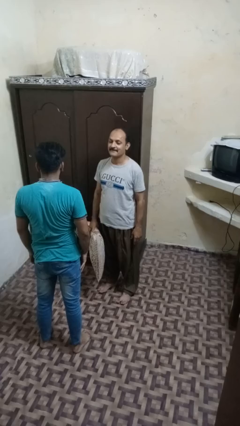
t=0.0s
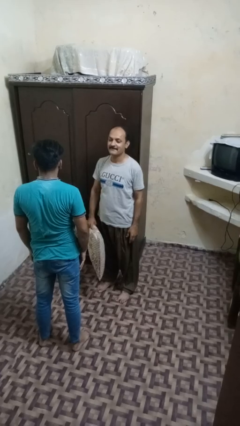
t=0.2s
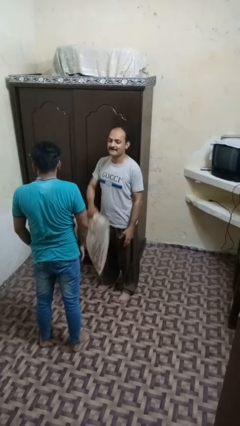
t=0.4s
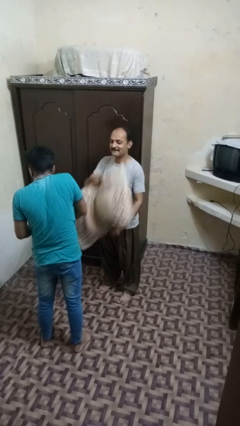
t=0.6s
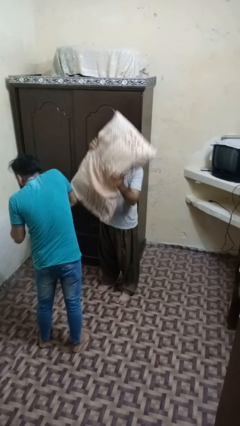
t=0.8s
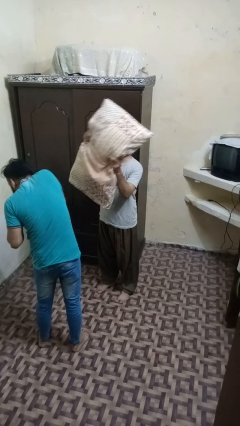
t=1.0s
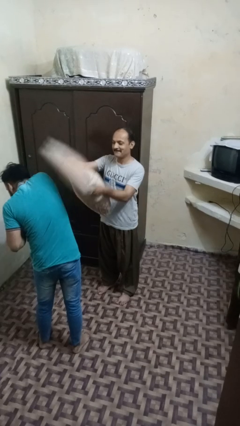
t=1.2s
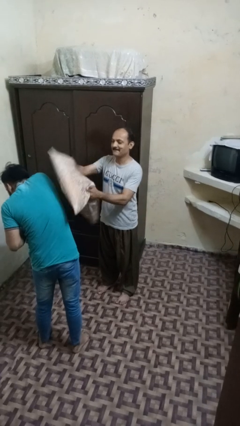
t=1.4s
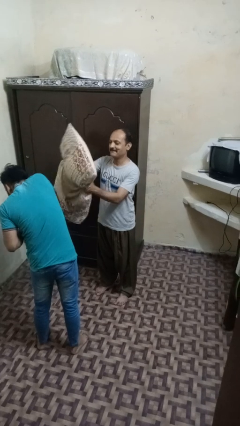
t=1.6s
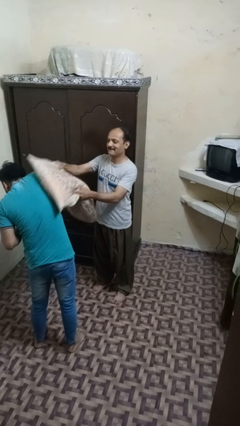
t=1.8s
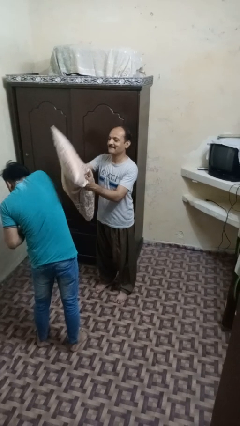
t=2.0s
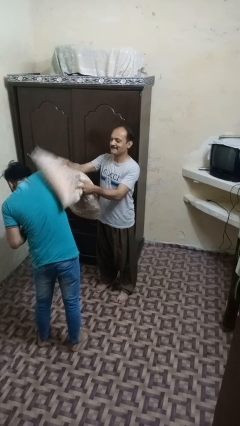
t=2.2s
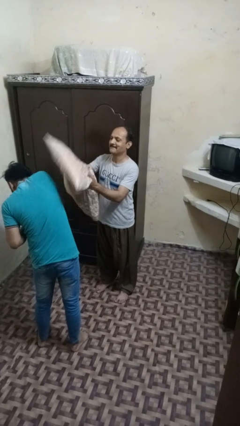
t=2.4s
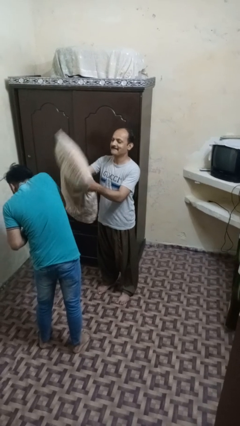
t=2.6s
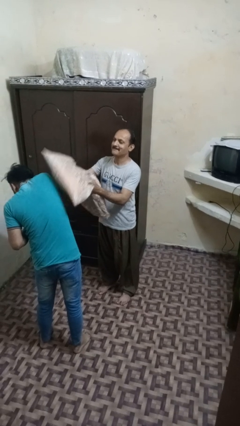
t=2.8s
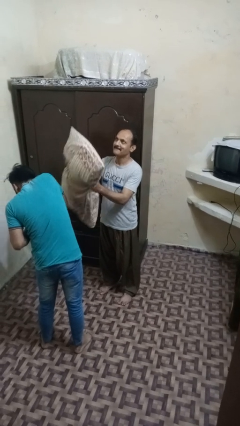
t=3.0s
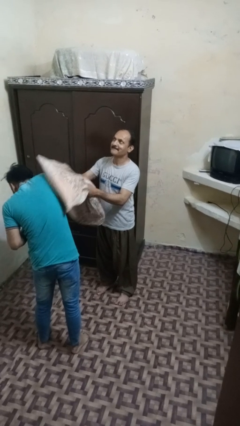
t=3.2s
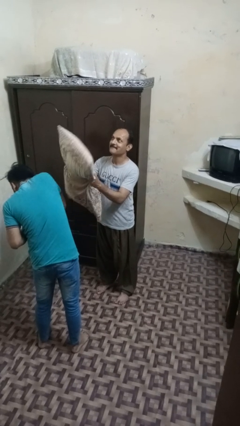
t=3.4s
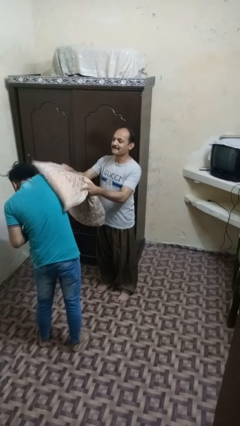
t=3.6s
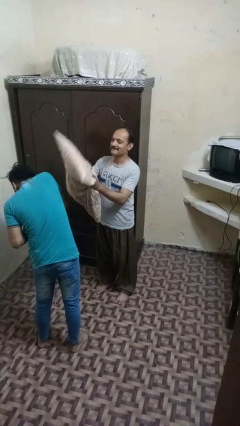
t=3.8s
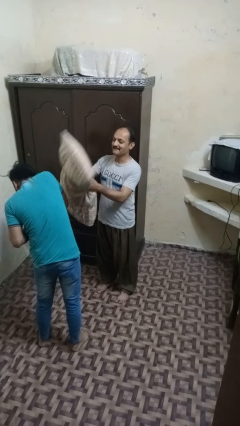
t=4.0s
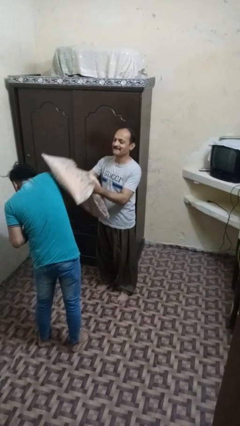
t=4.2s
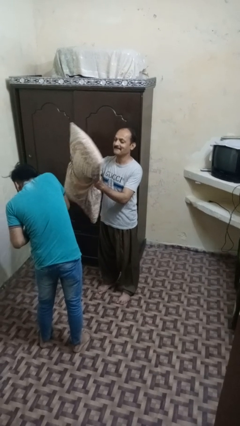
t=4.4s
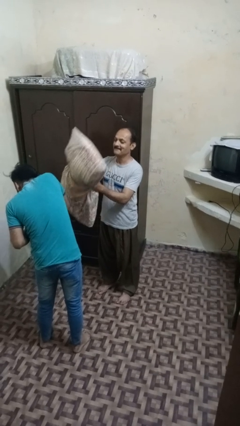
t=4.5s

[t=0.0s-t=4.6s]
person hits person with pillow

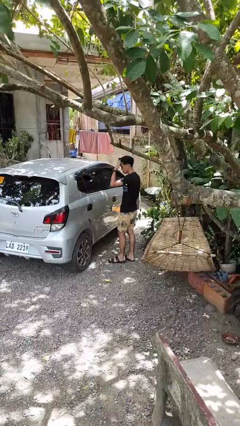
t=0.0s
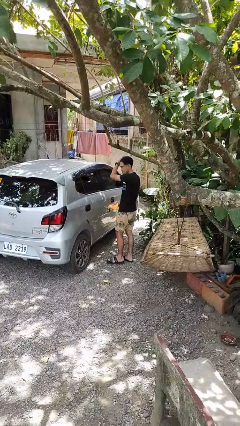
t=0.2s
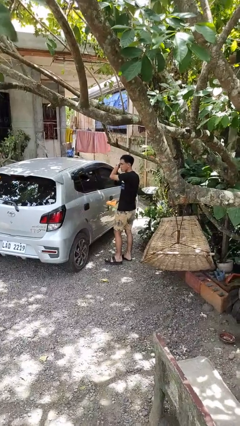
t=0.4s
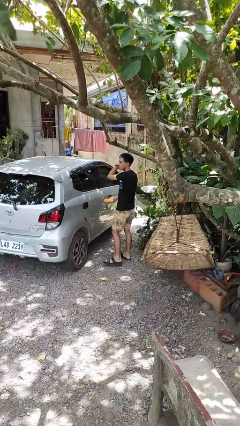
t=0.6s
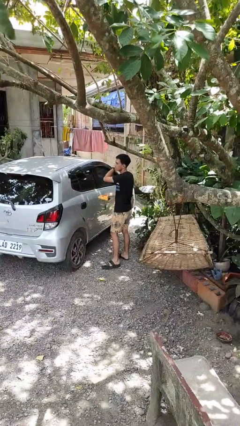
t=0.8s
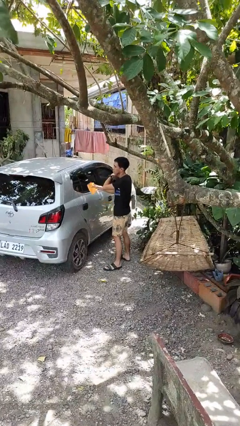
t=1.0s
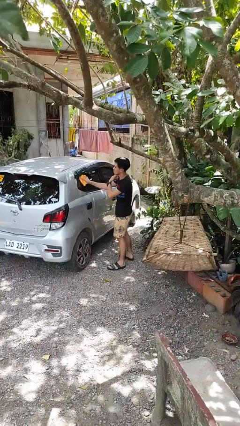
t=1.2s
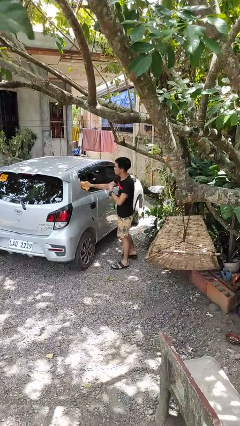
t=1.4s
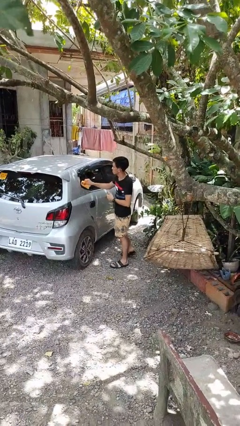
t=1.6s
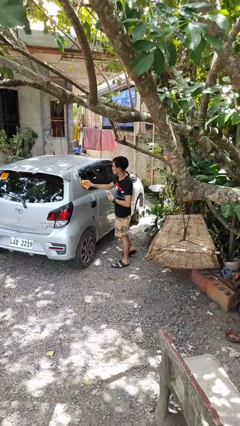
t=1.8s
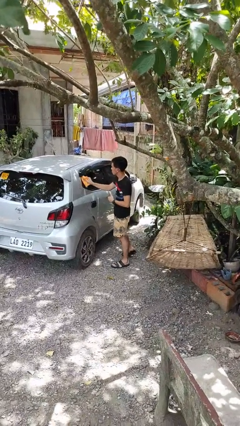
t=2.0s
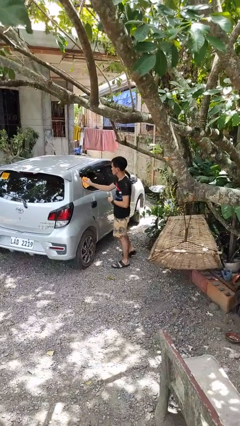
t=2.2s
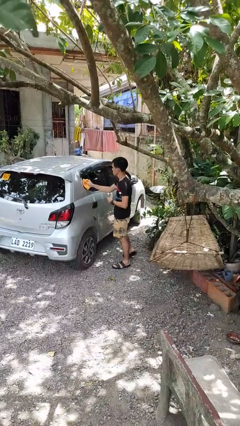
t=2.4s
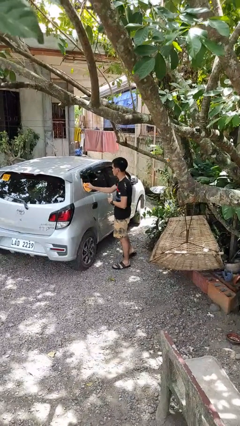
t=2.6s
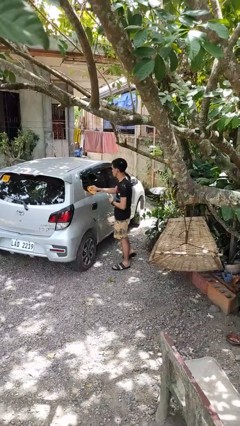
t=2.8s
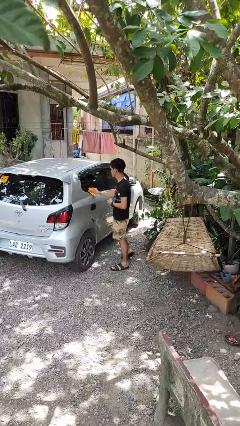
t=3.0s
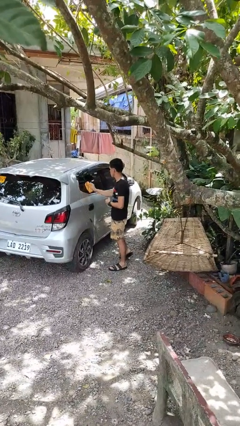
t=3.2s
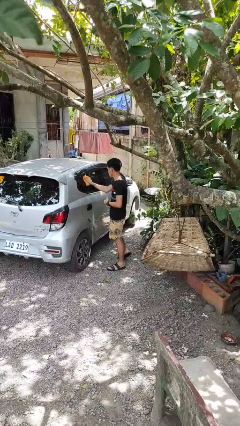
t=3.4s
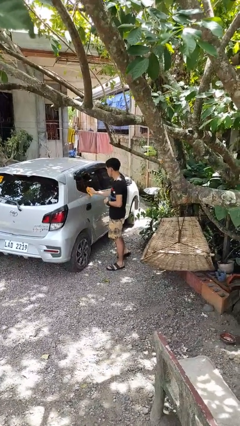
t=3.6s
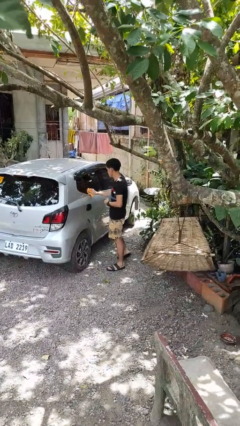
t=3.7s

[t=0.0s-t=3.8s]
person polishes car with rag

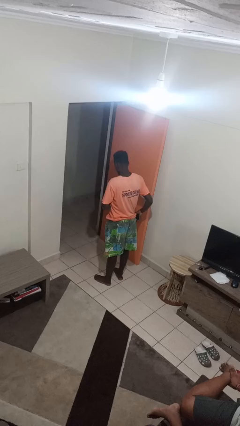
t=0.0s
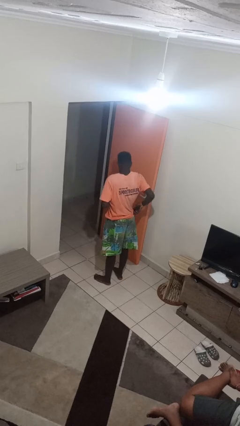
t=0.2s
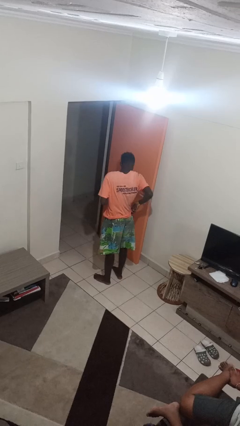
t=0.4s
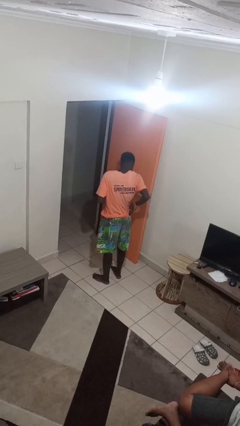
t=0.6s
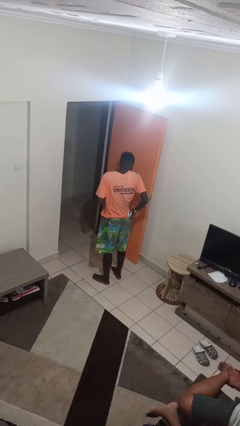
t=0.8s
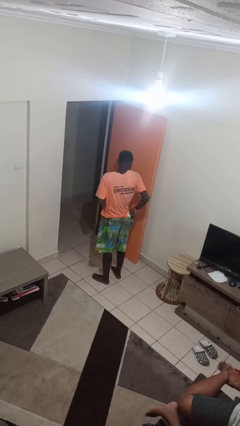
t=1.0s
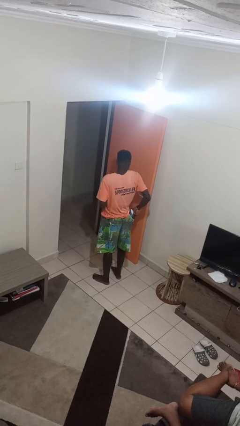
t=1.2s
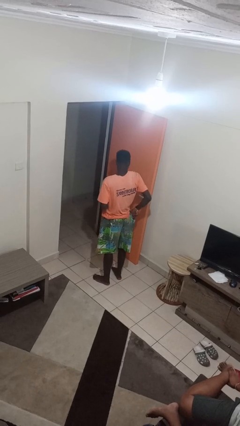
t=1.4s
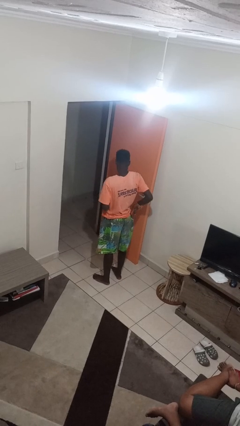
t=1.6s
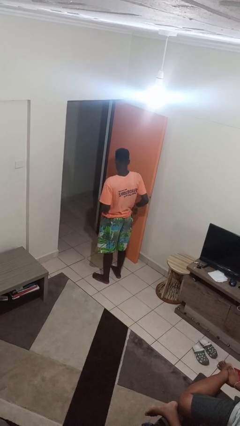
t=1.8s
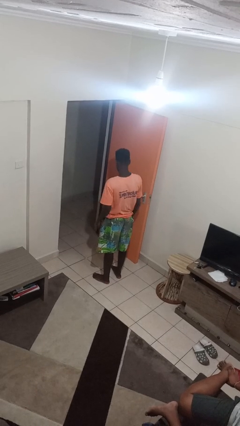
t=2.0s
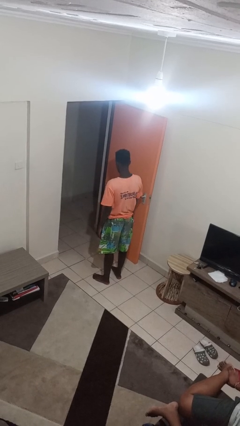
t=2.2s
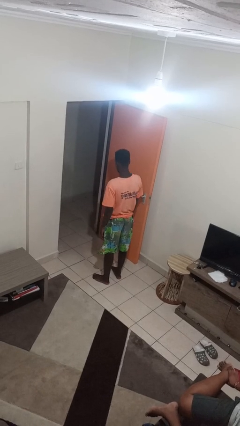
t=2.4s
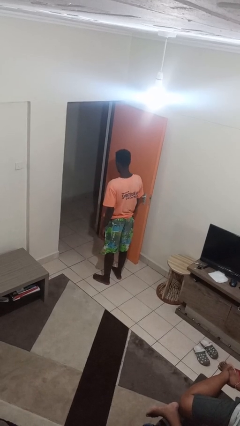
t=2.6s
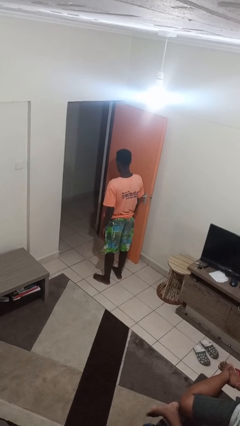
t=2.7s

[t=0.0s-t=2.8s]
person puts phone into pocket

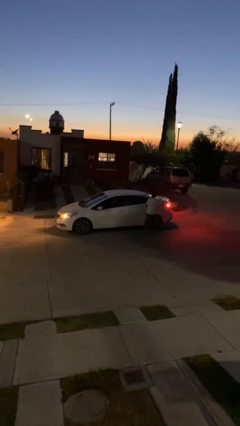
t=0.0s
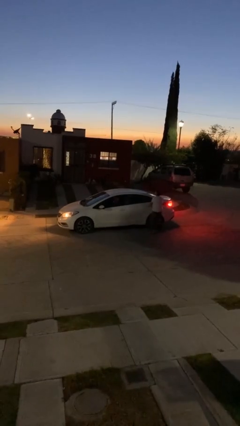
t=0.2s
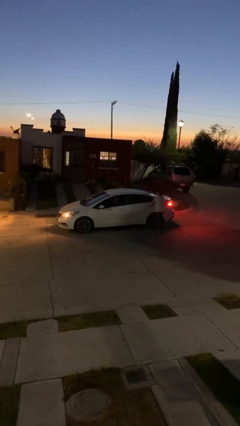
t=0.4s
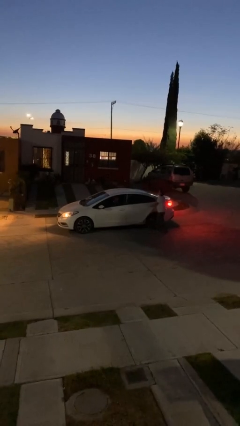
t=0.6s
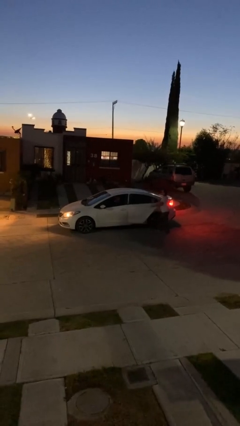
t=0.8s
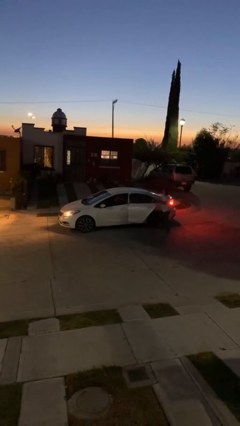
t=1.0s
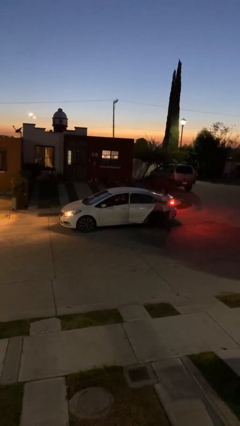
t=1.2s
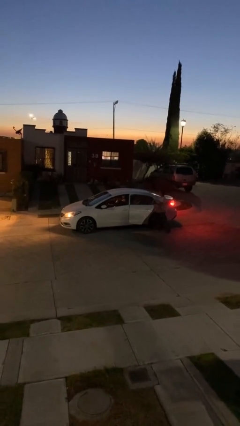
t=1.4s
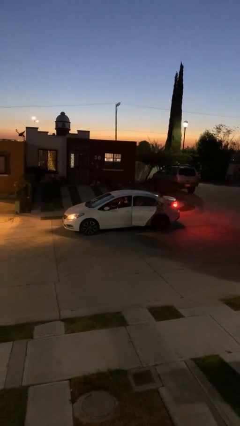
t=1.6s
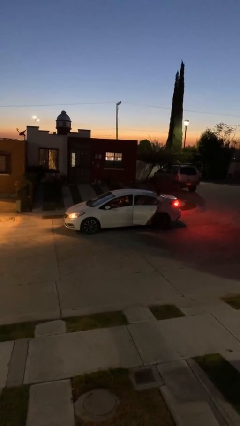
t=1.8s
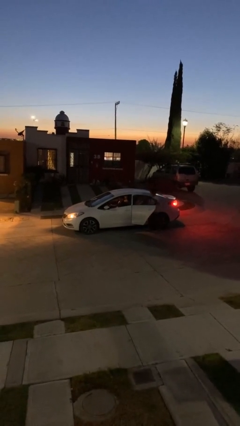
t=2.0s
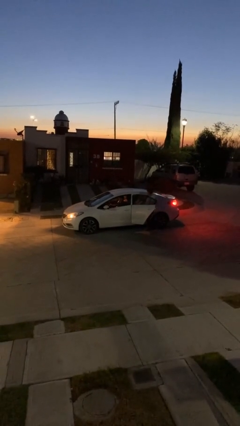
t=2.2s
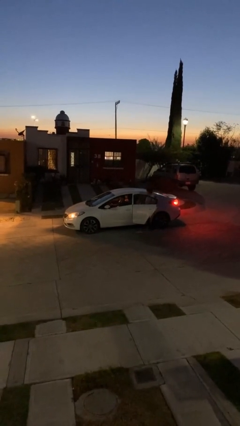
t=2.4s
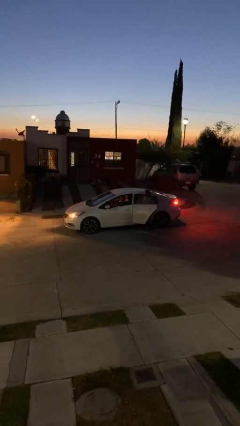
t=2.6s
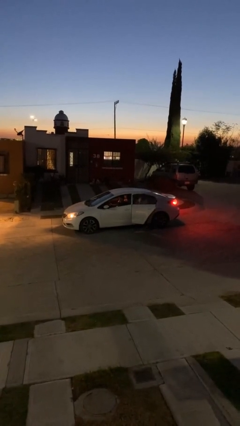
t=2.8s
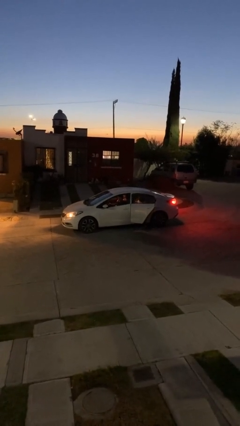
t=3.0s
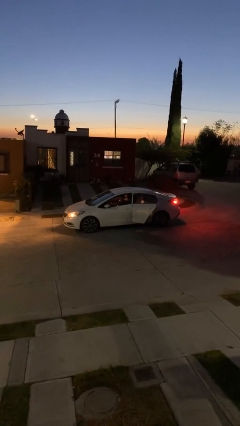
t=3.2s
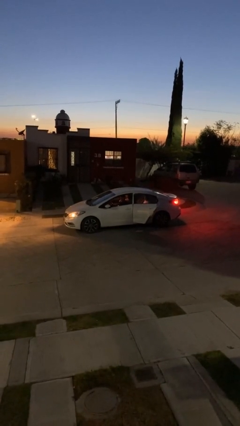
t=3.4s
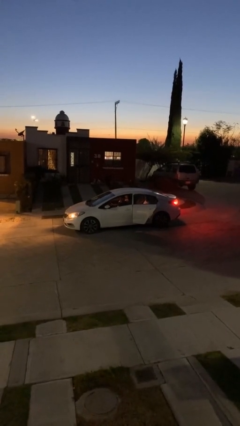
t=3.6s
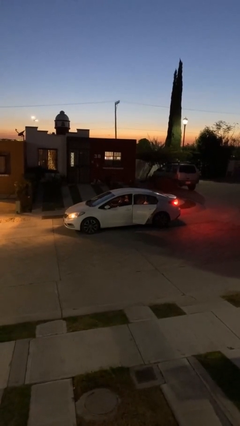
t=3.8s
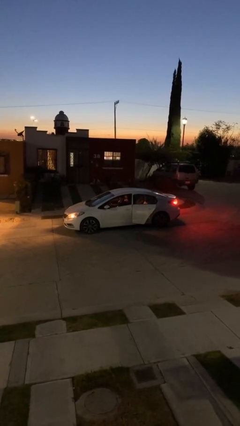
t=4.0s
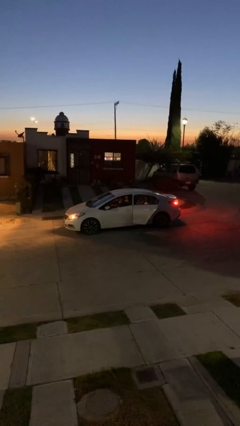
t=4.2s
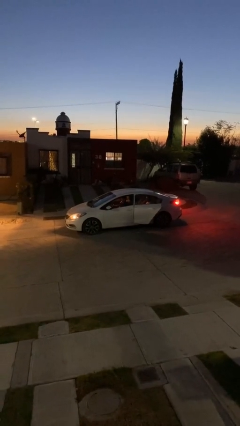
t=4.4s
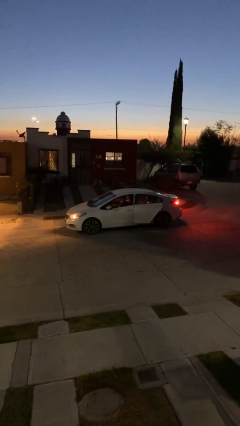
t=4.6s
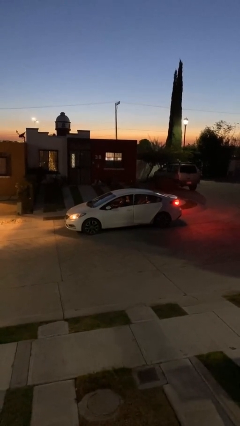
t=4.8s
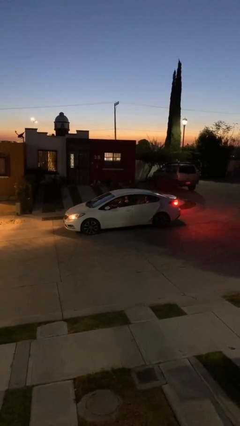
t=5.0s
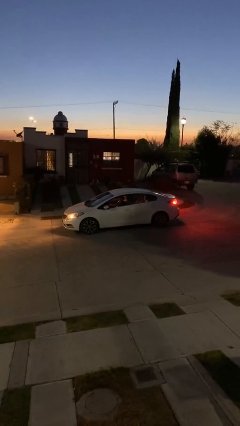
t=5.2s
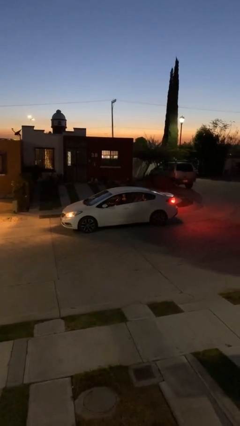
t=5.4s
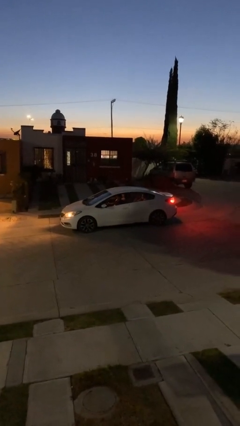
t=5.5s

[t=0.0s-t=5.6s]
car picks up person

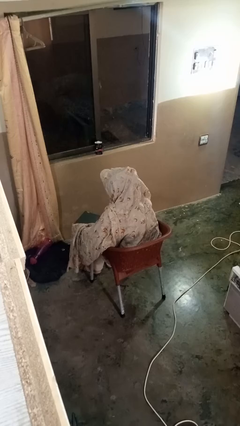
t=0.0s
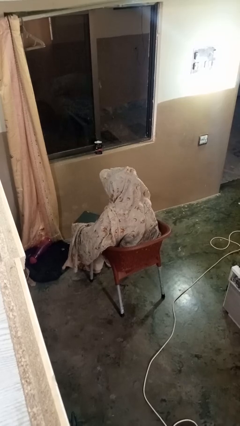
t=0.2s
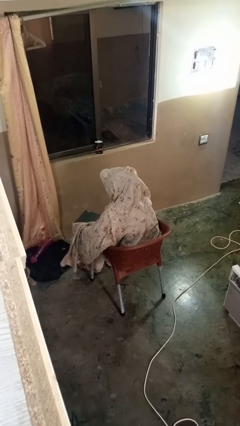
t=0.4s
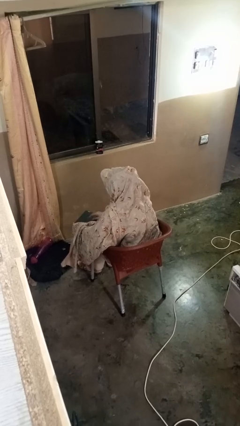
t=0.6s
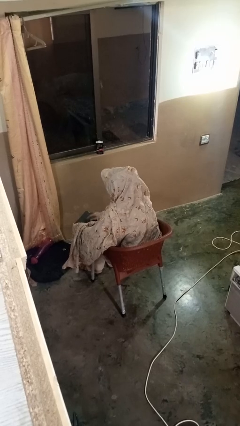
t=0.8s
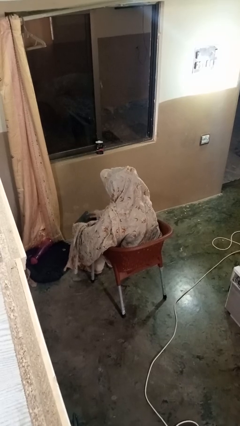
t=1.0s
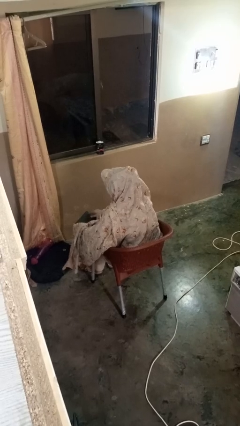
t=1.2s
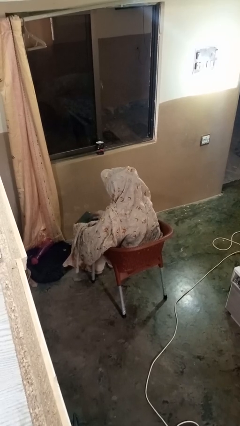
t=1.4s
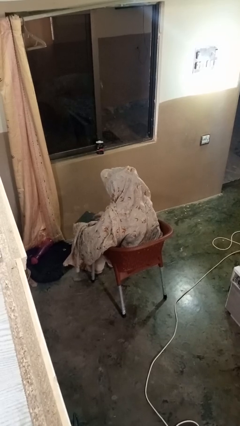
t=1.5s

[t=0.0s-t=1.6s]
person interacts with tablet
